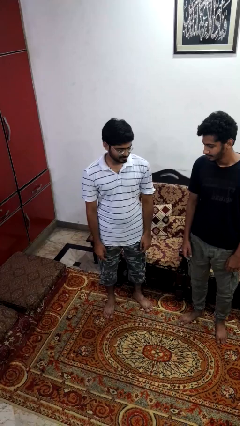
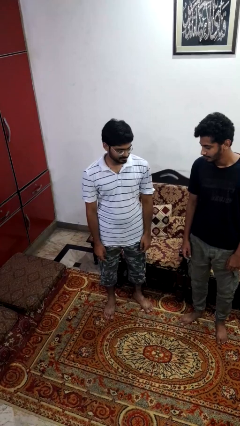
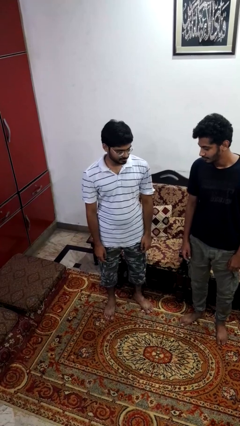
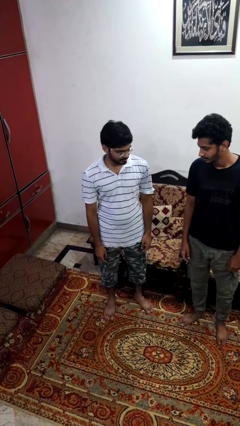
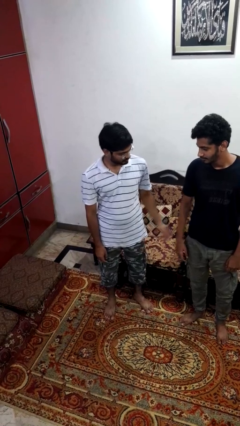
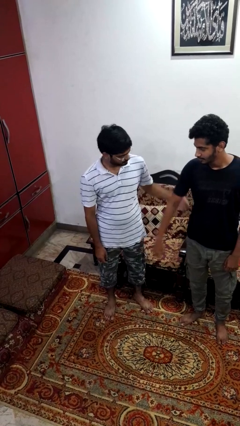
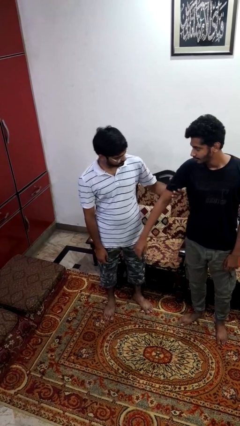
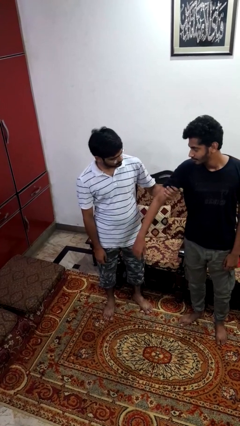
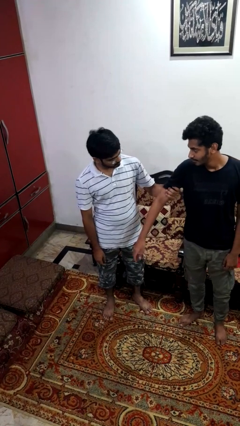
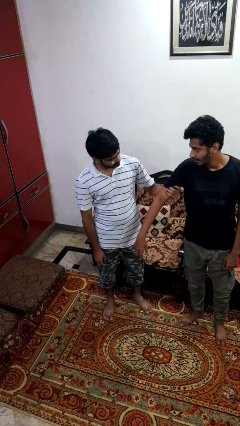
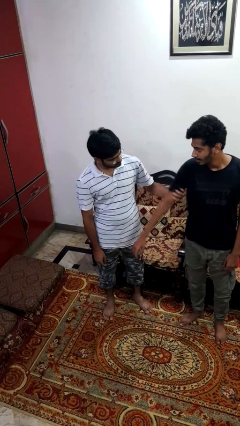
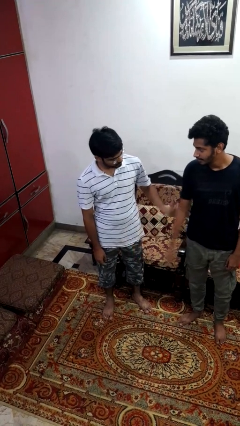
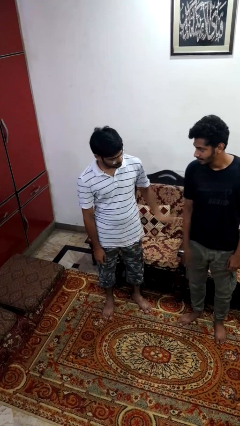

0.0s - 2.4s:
person grabs person by bicep

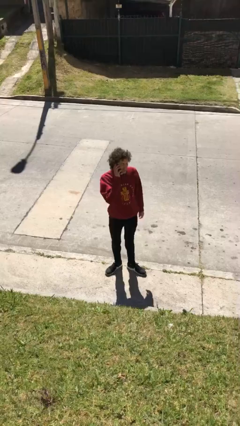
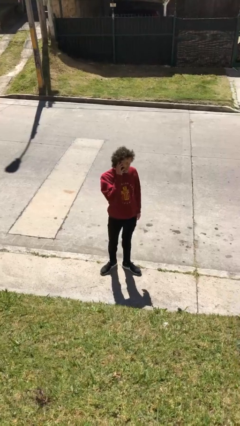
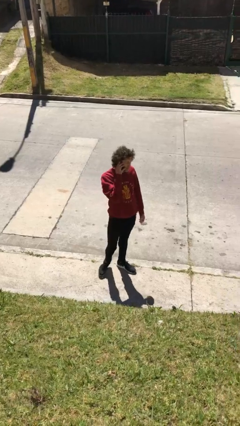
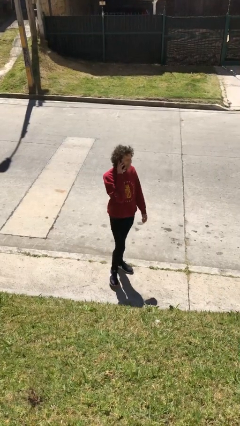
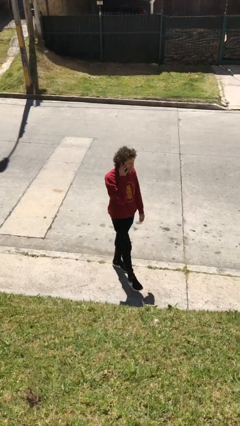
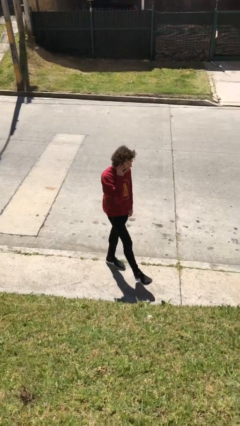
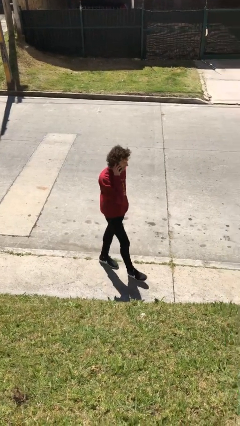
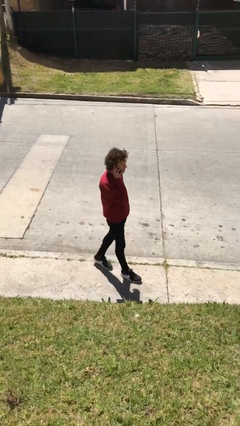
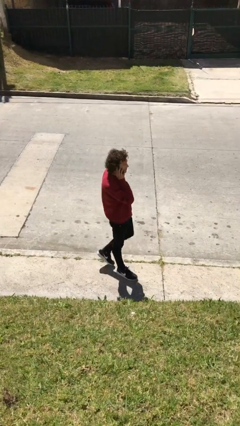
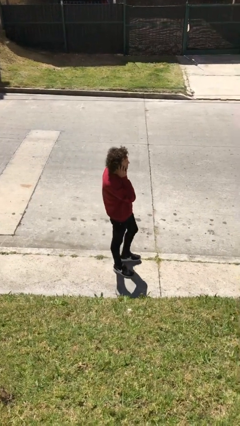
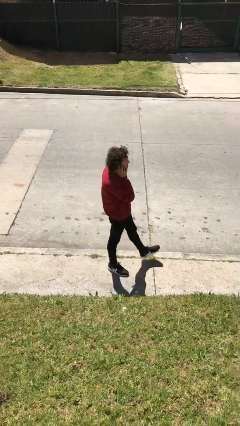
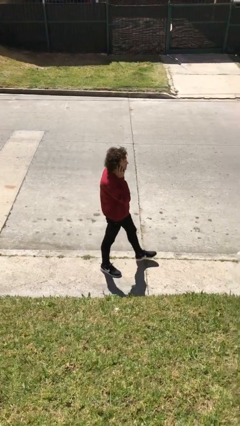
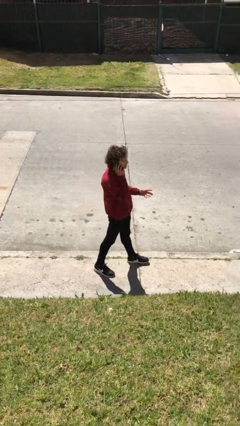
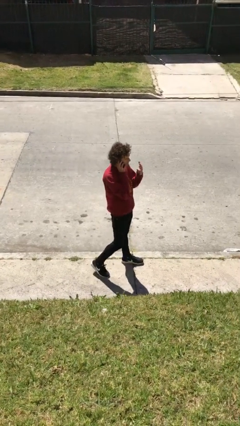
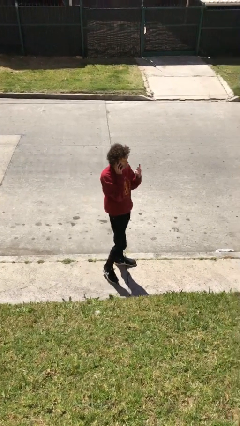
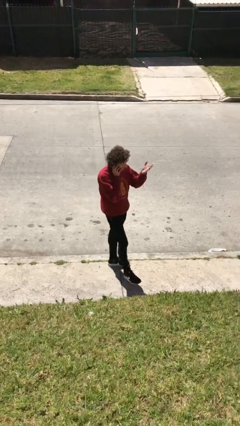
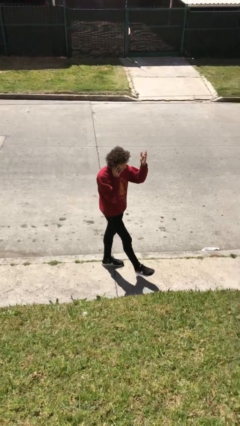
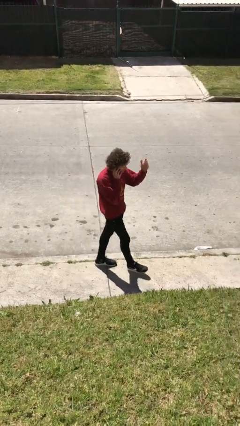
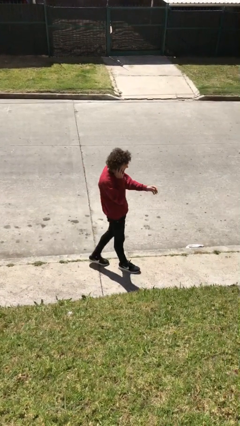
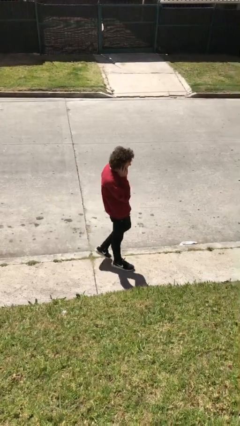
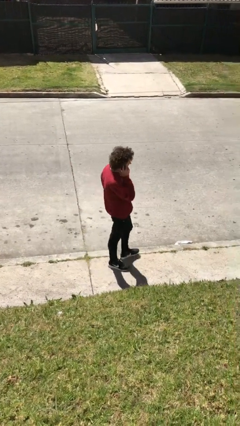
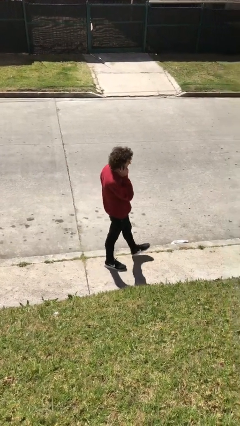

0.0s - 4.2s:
person talks on phone

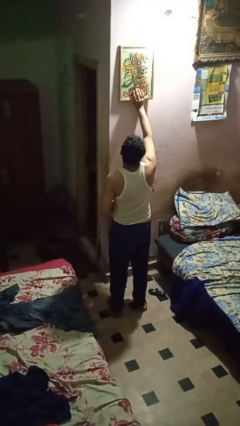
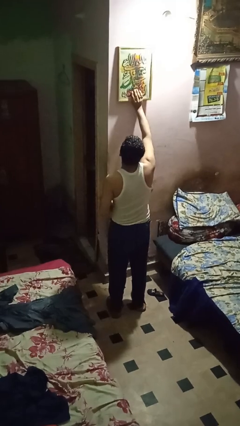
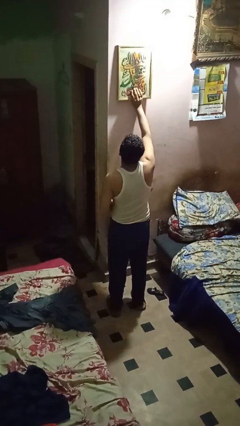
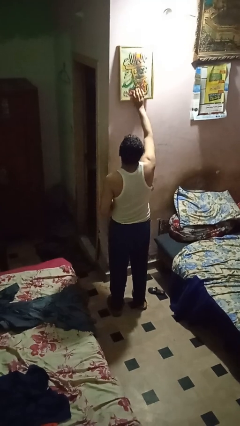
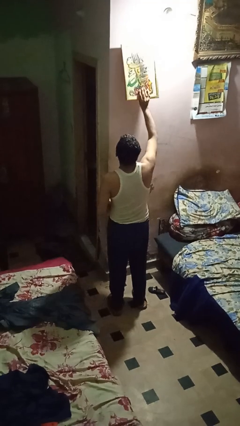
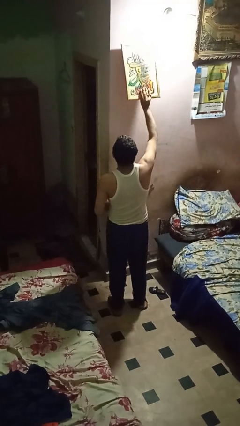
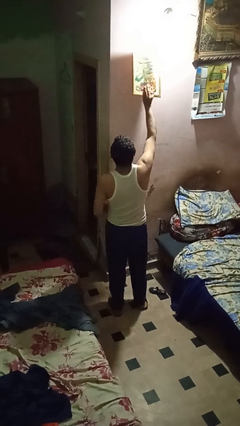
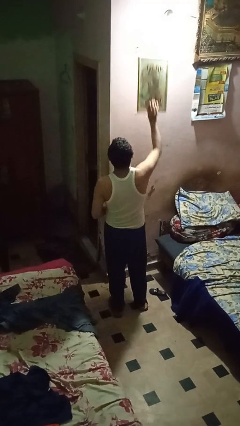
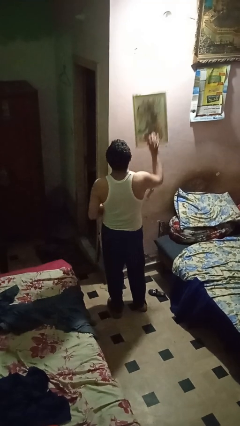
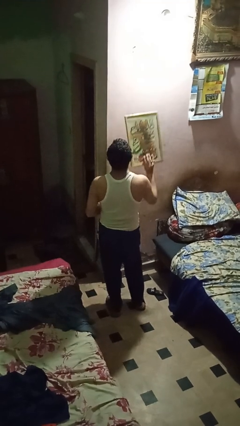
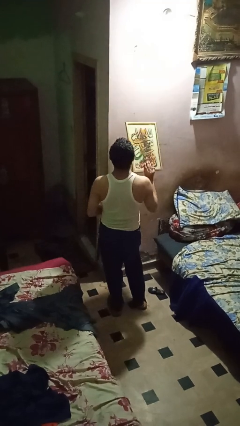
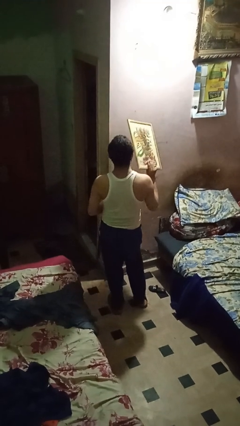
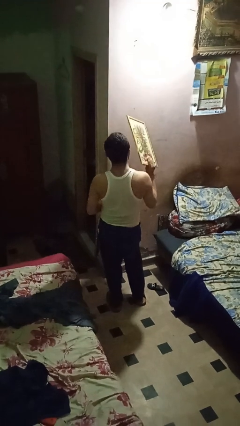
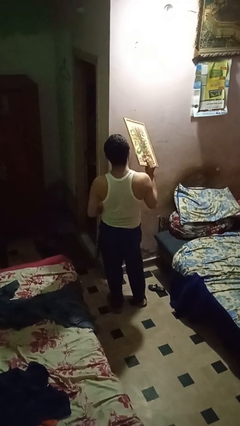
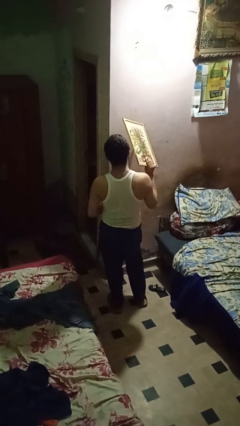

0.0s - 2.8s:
person takes down picture frame

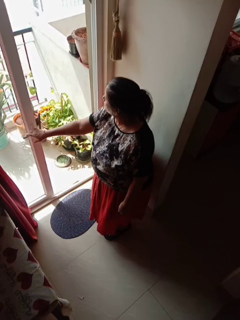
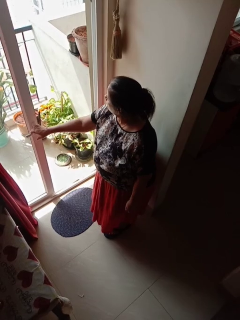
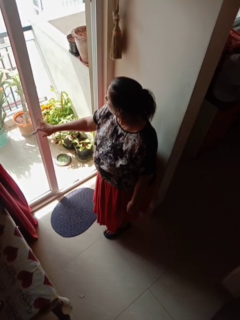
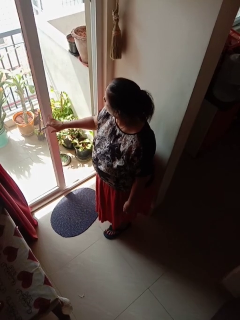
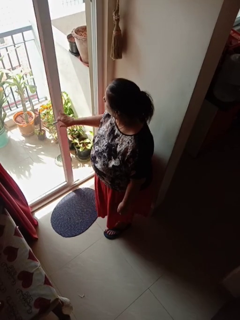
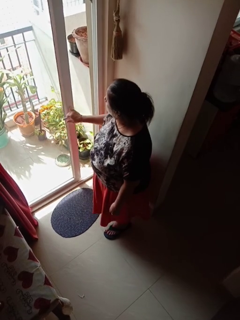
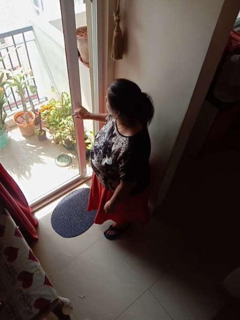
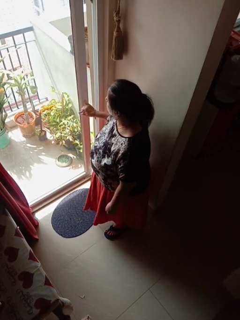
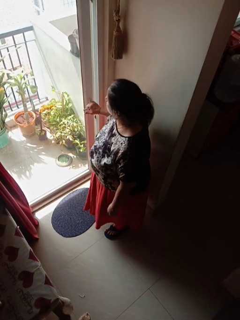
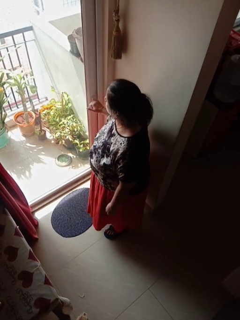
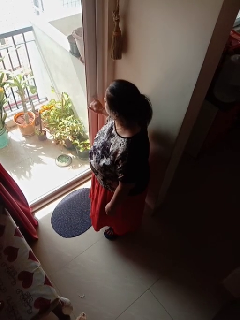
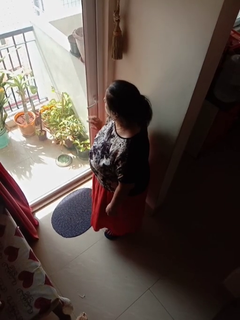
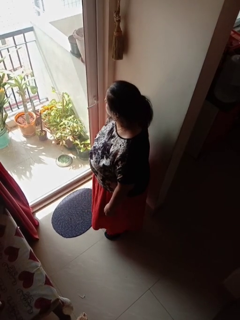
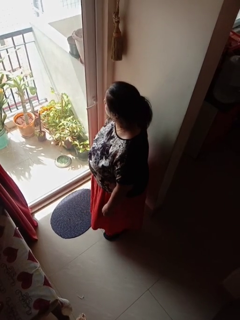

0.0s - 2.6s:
person closes sliding door

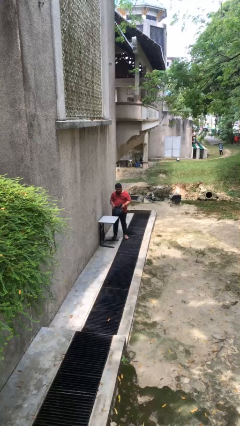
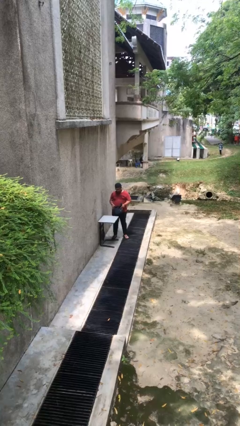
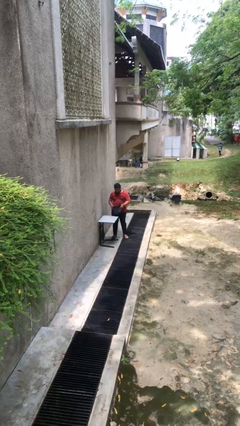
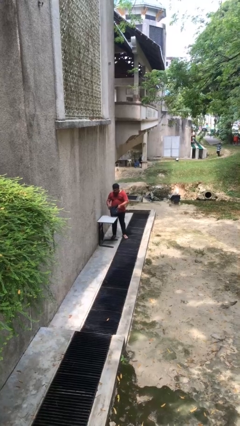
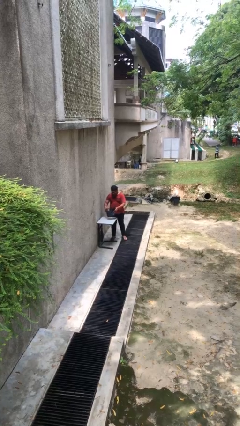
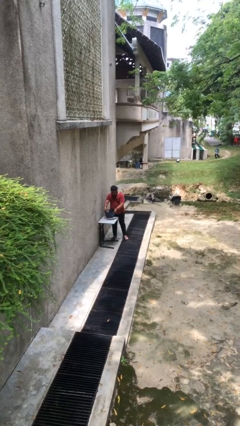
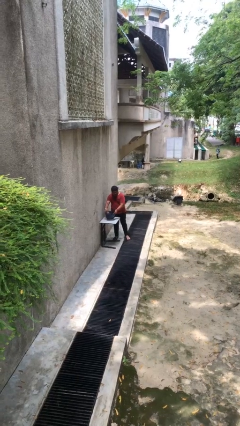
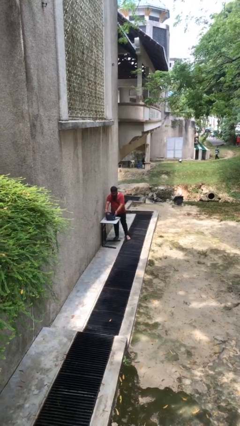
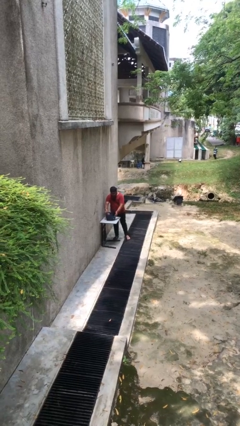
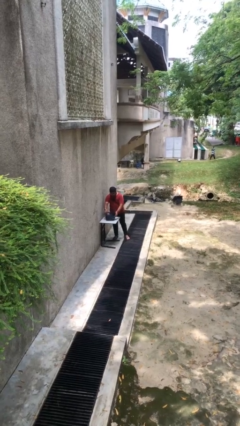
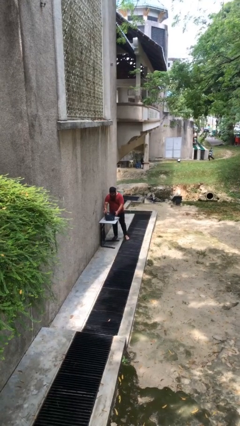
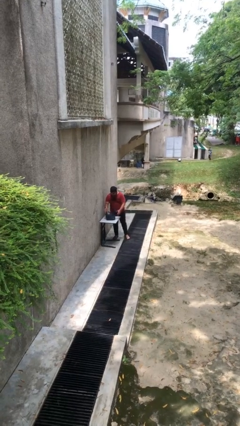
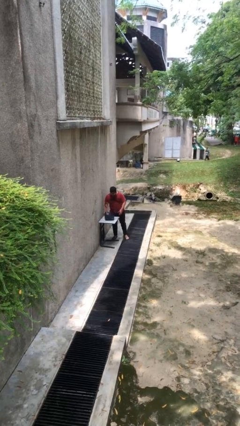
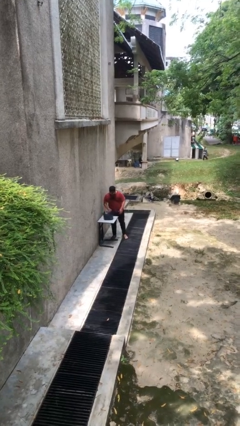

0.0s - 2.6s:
person puts down object on table

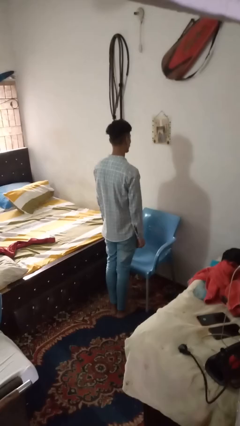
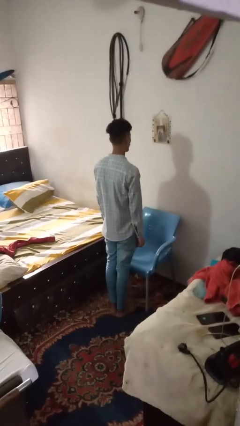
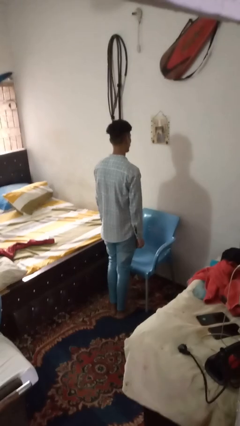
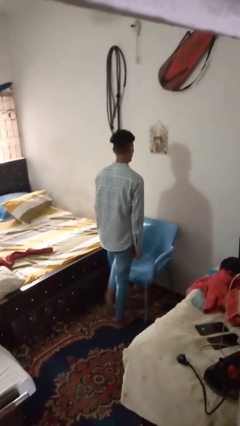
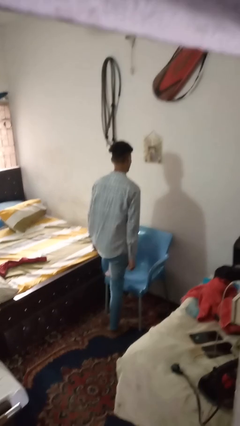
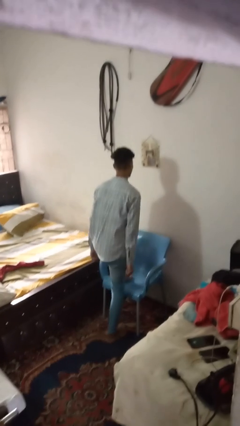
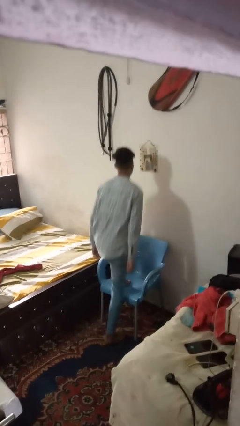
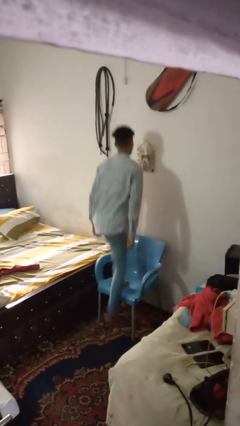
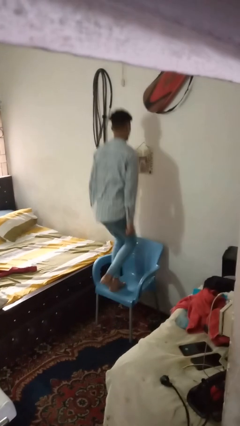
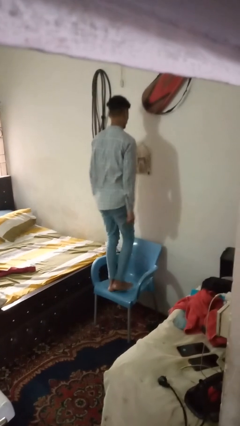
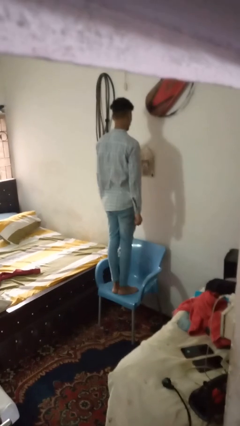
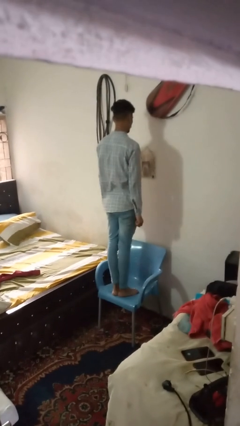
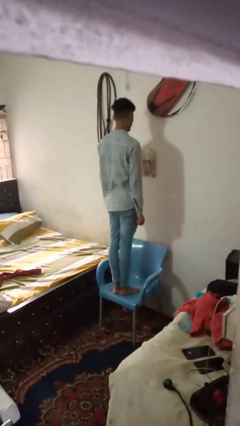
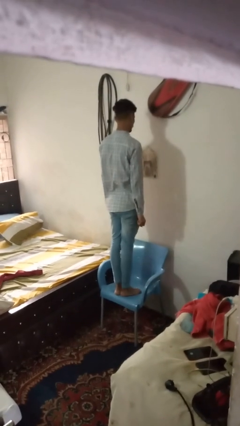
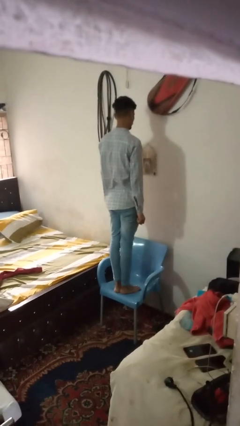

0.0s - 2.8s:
person climbs on chair

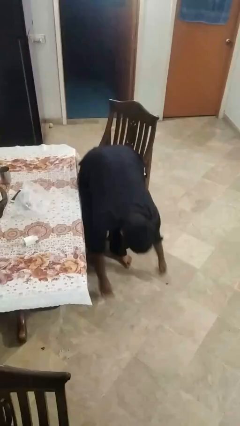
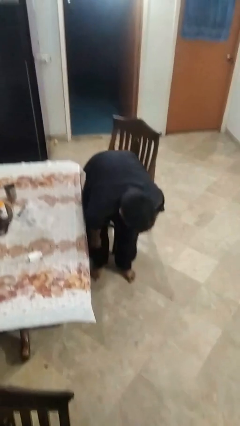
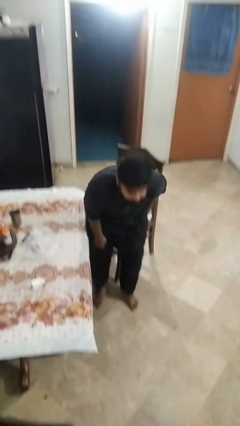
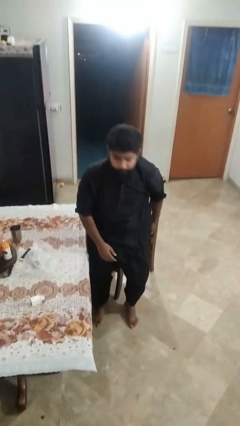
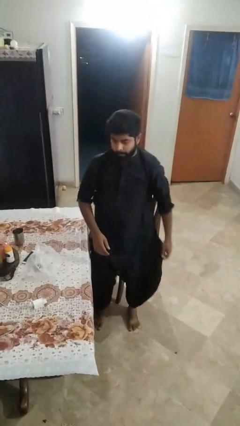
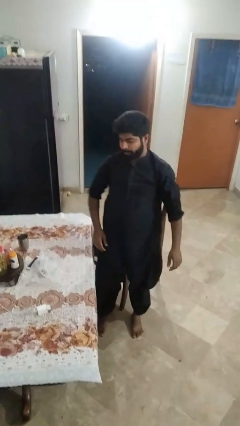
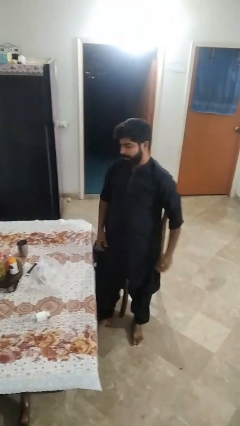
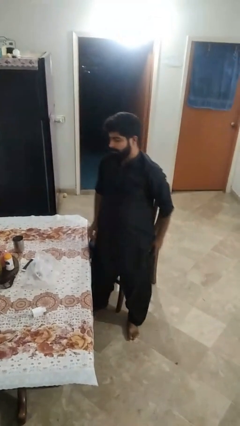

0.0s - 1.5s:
person stands up from floor
